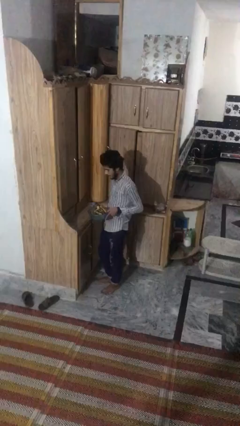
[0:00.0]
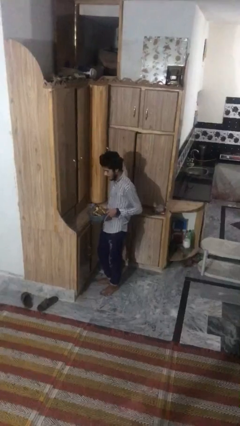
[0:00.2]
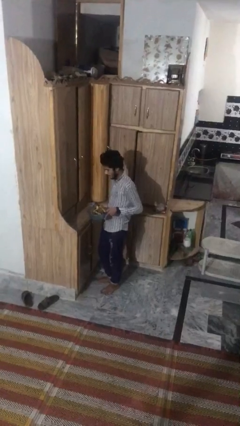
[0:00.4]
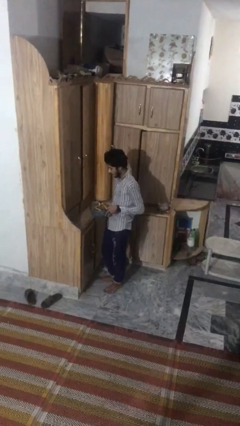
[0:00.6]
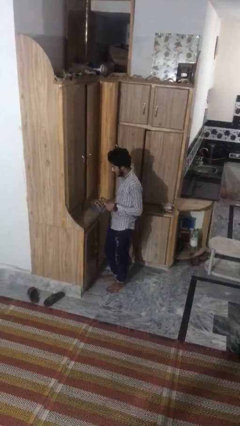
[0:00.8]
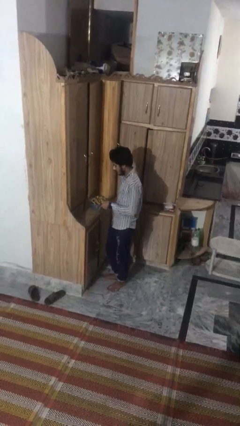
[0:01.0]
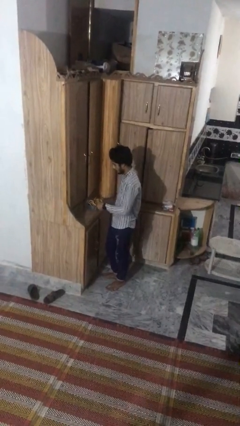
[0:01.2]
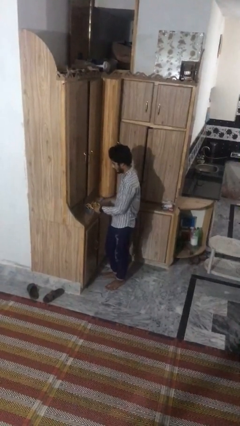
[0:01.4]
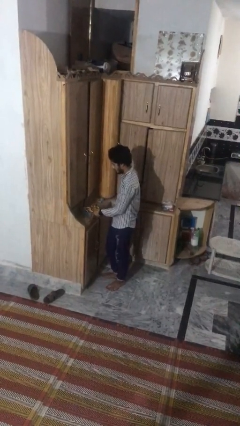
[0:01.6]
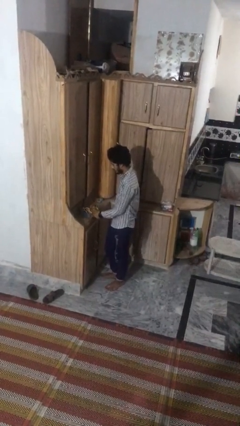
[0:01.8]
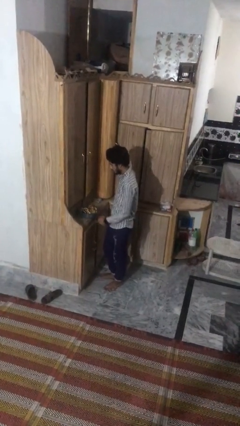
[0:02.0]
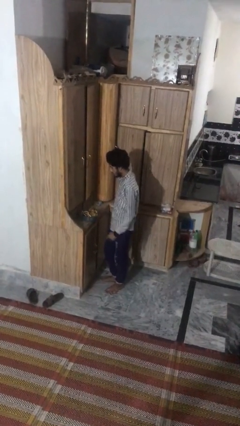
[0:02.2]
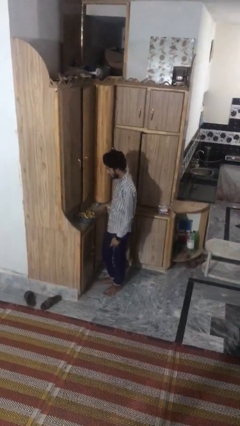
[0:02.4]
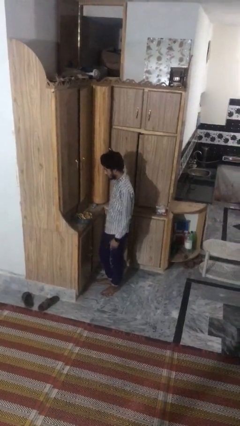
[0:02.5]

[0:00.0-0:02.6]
person puts down object on countertop

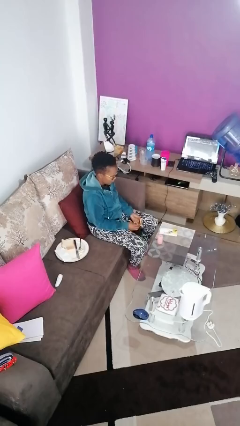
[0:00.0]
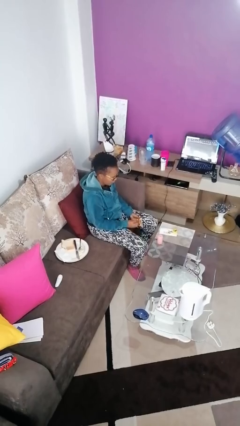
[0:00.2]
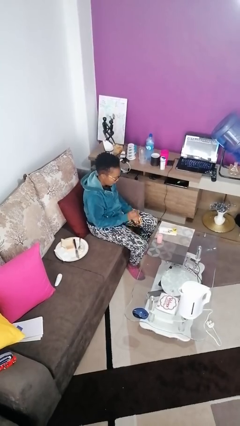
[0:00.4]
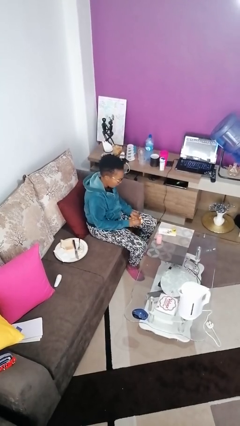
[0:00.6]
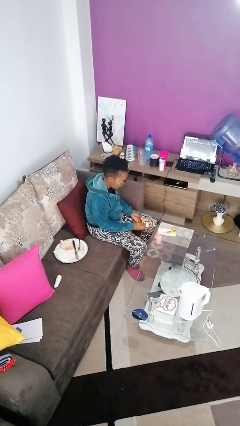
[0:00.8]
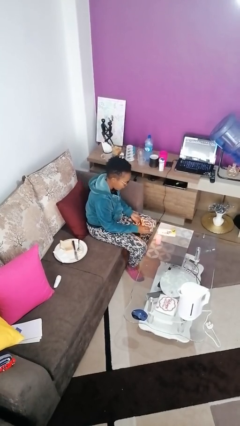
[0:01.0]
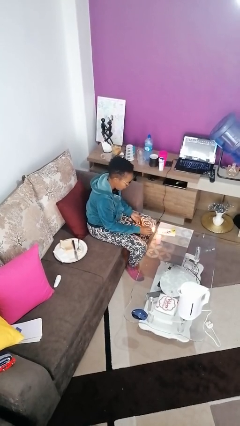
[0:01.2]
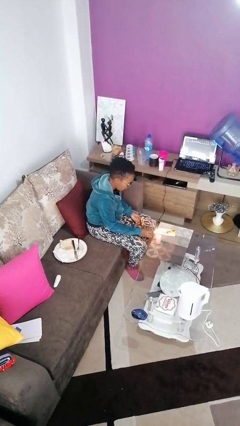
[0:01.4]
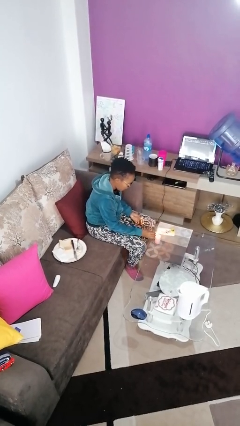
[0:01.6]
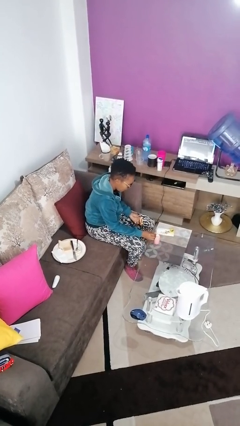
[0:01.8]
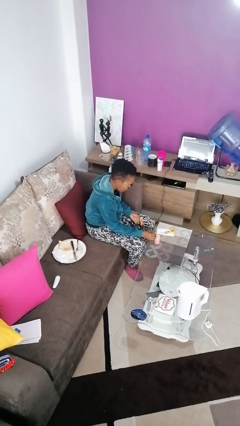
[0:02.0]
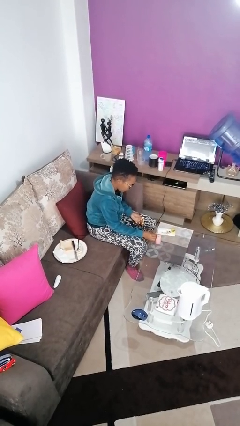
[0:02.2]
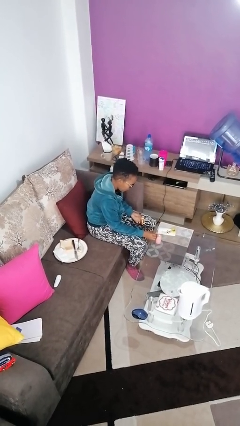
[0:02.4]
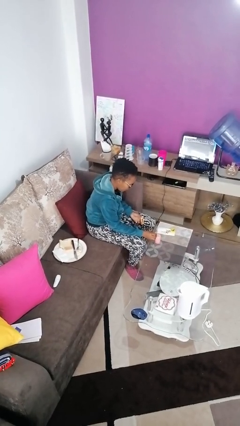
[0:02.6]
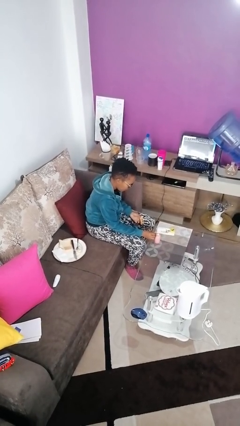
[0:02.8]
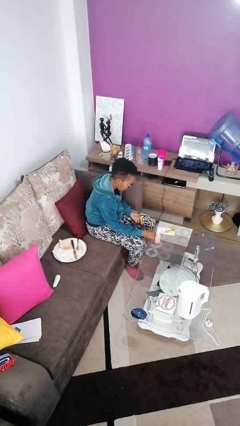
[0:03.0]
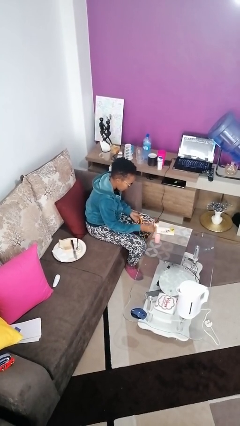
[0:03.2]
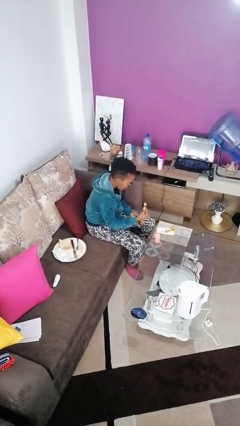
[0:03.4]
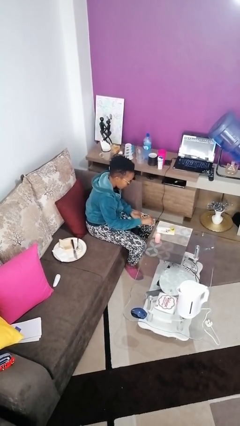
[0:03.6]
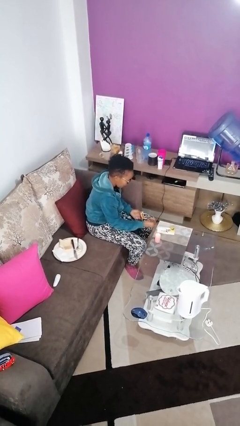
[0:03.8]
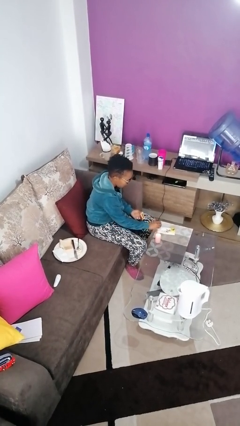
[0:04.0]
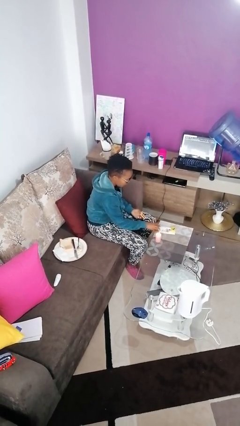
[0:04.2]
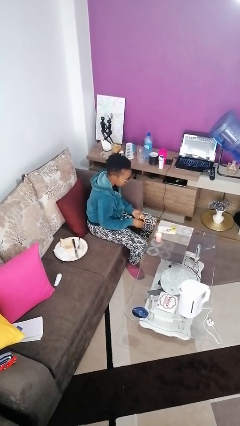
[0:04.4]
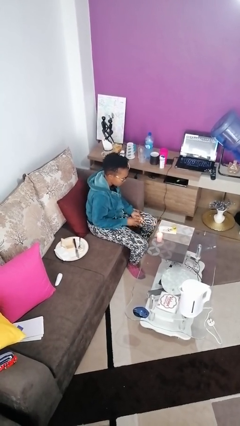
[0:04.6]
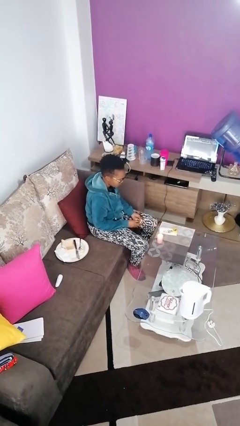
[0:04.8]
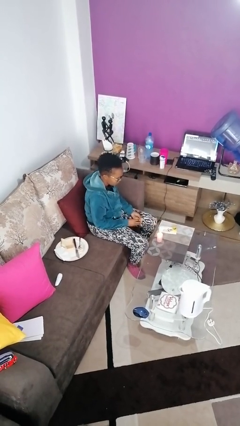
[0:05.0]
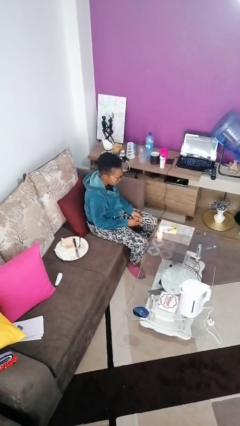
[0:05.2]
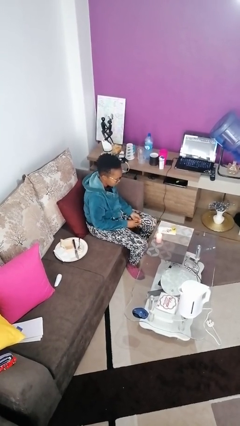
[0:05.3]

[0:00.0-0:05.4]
person lights candle

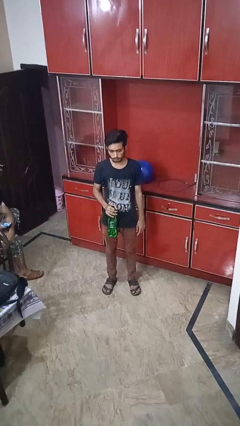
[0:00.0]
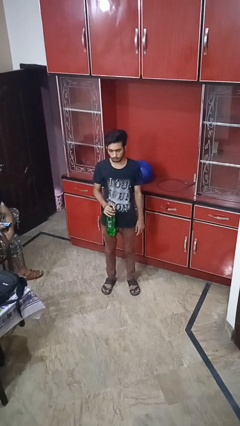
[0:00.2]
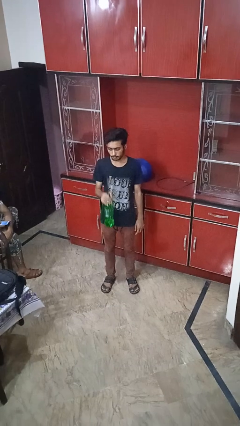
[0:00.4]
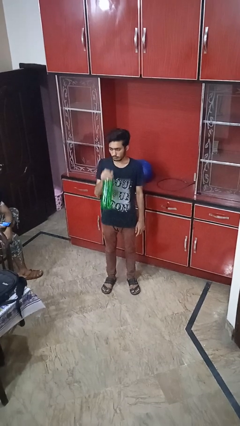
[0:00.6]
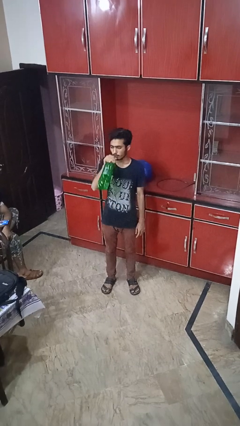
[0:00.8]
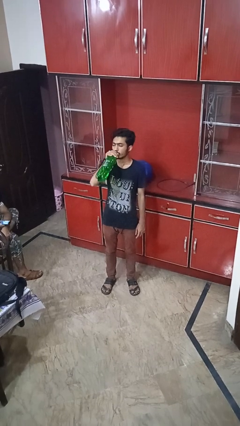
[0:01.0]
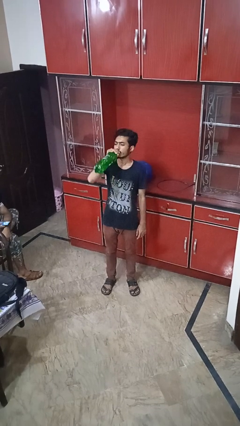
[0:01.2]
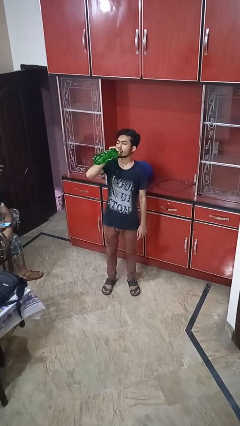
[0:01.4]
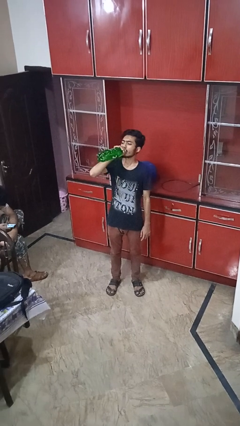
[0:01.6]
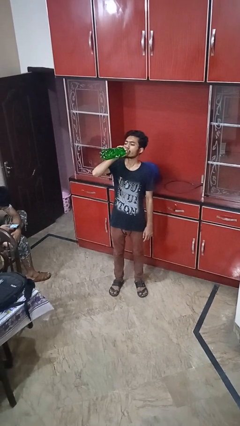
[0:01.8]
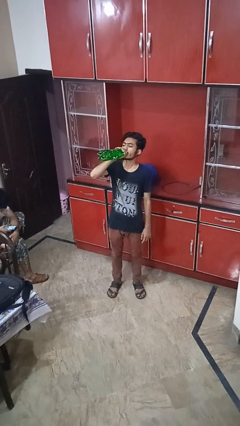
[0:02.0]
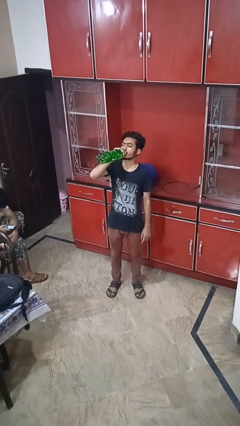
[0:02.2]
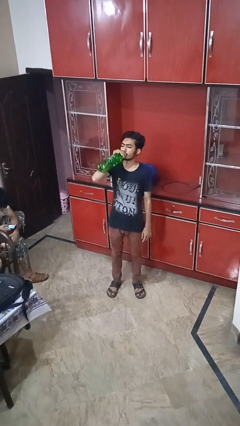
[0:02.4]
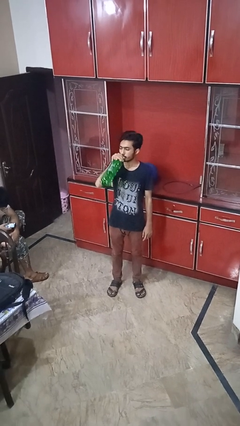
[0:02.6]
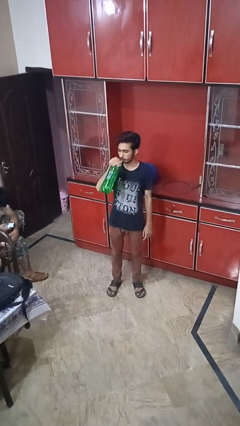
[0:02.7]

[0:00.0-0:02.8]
person drinks from bottle

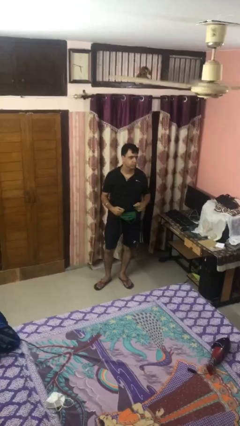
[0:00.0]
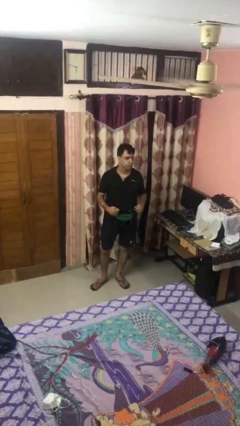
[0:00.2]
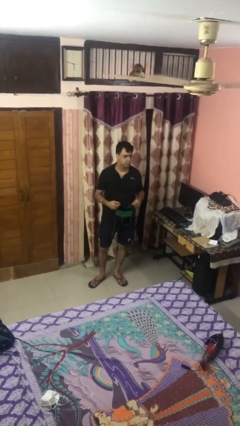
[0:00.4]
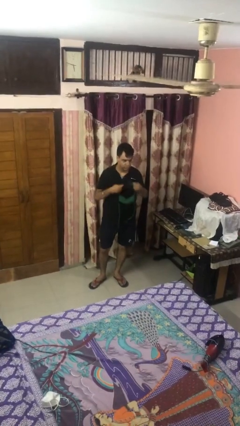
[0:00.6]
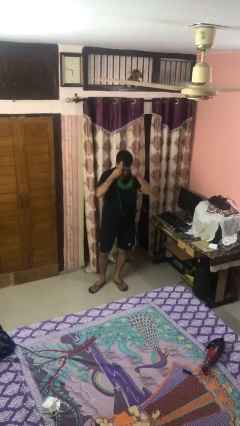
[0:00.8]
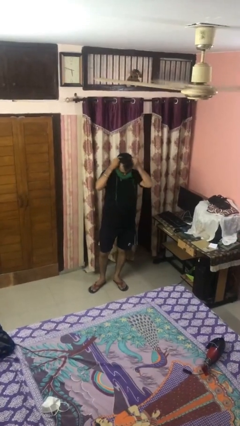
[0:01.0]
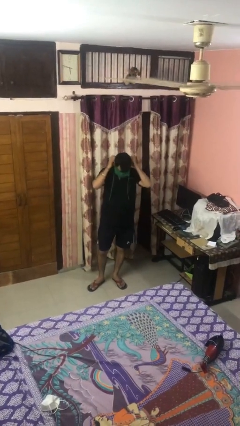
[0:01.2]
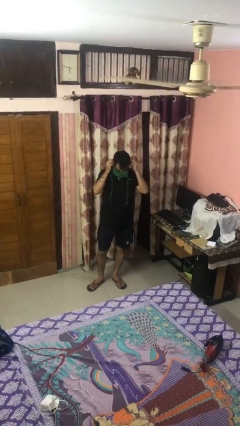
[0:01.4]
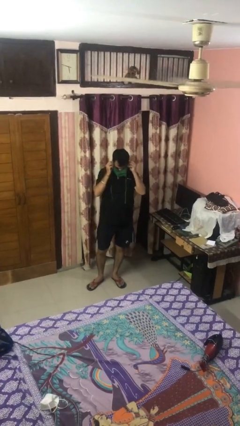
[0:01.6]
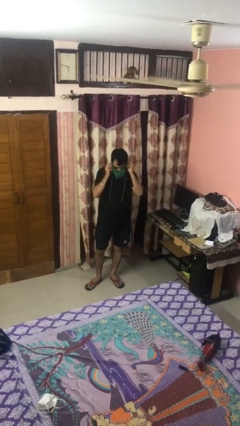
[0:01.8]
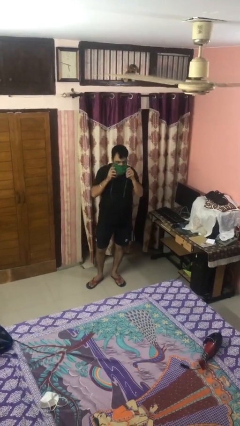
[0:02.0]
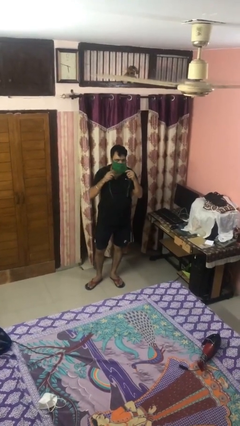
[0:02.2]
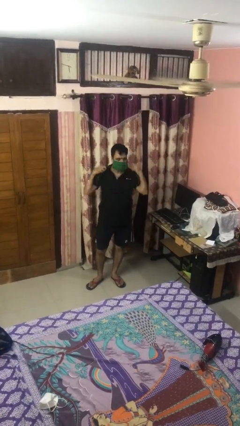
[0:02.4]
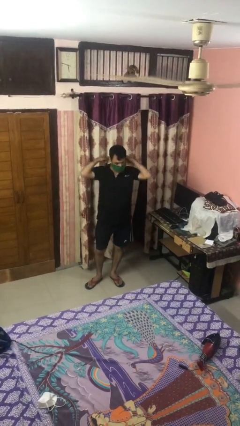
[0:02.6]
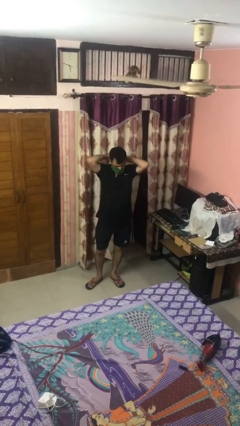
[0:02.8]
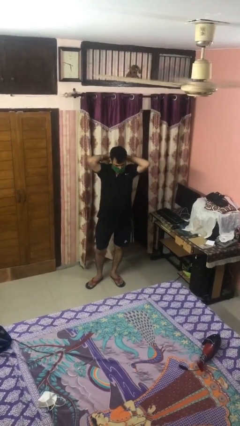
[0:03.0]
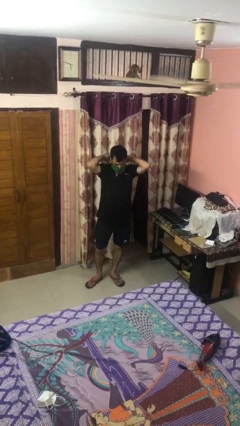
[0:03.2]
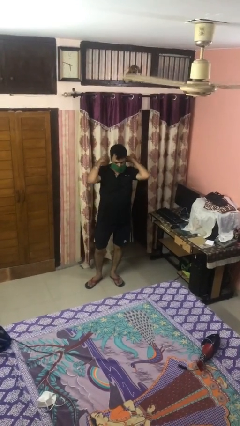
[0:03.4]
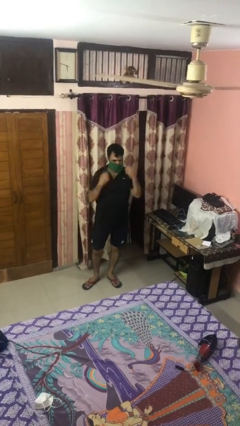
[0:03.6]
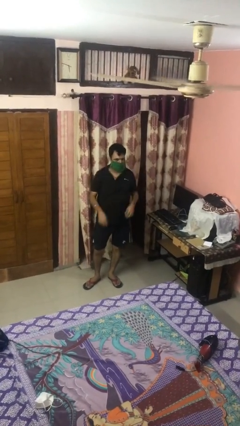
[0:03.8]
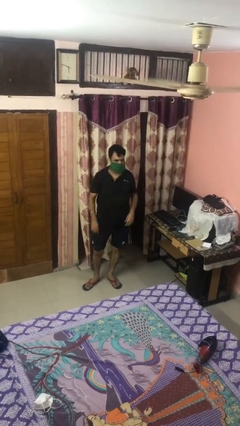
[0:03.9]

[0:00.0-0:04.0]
person puts on facemask

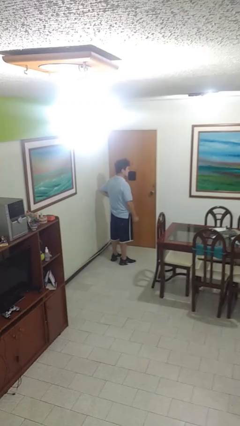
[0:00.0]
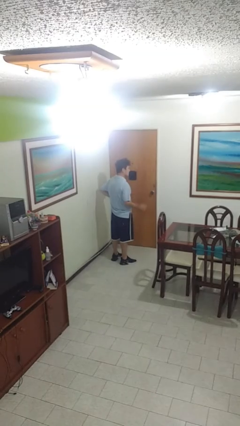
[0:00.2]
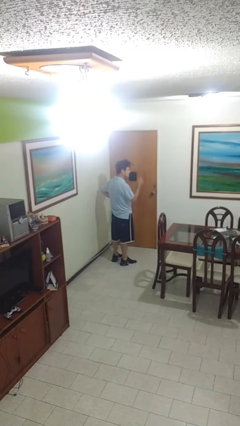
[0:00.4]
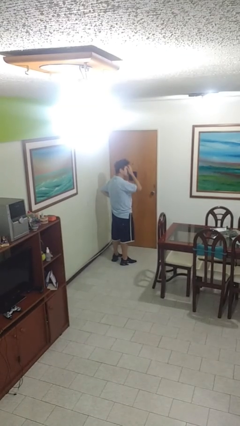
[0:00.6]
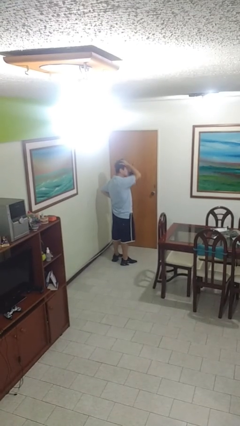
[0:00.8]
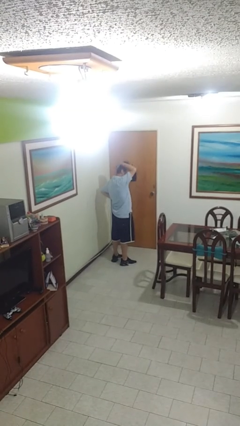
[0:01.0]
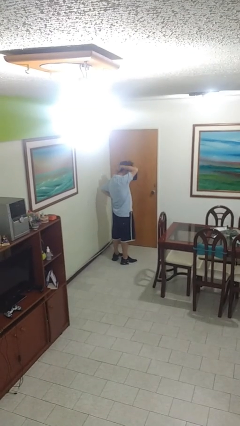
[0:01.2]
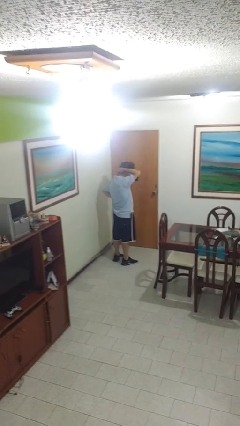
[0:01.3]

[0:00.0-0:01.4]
person strokes hair

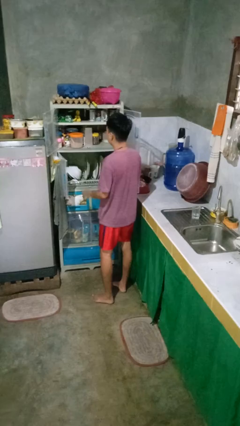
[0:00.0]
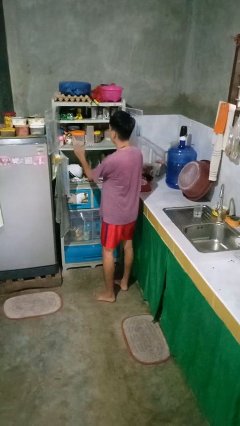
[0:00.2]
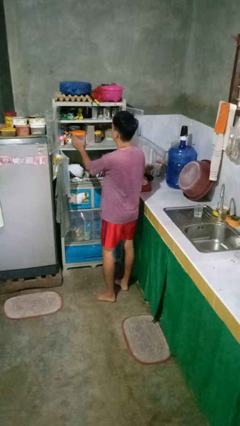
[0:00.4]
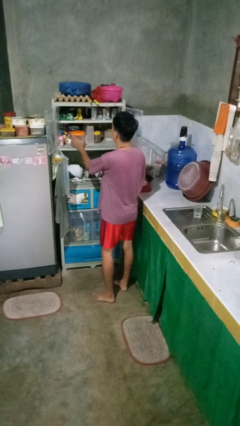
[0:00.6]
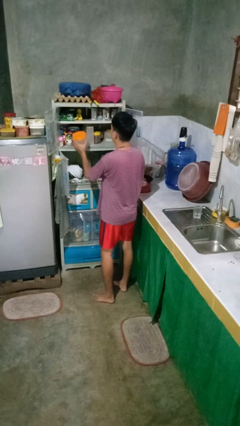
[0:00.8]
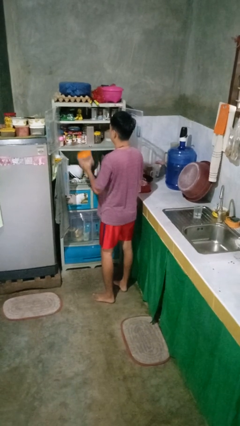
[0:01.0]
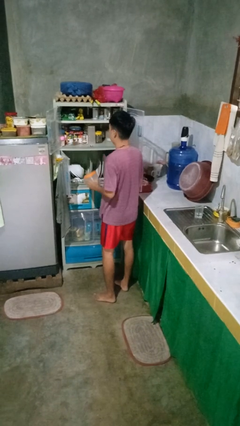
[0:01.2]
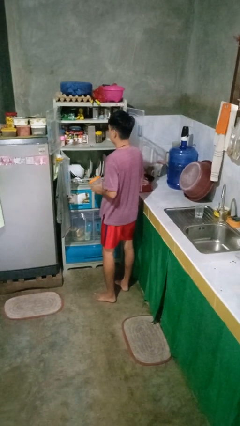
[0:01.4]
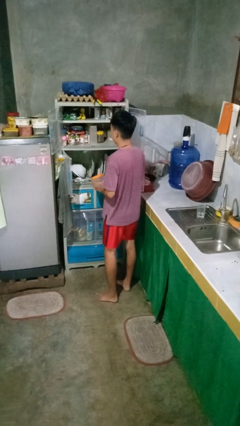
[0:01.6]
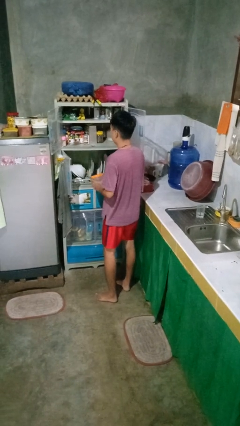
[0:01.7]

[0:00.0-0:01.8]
person takes object from cabinet
